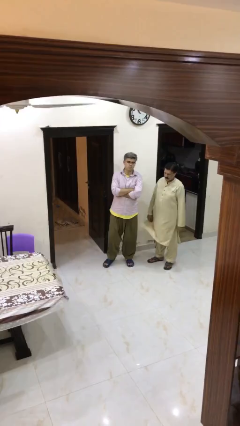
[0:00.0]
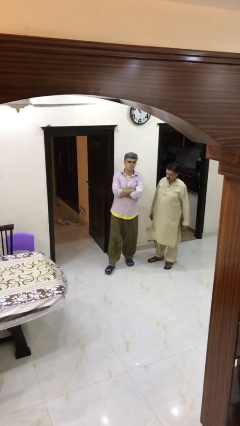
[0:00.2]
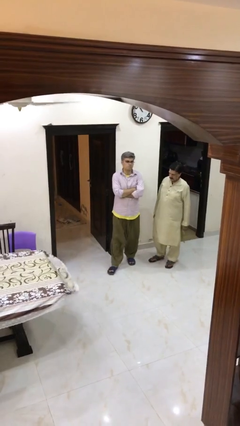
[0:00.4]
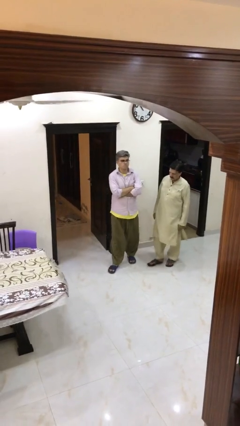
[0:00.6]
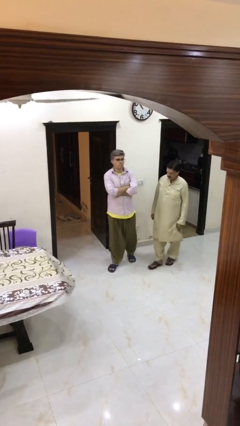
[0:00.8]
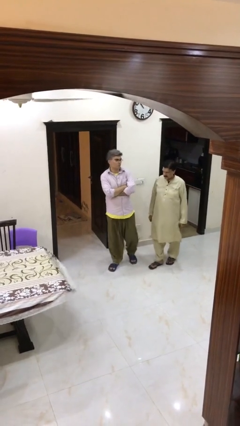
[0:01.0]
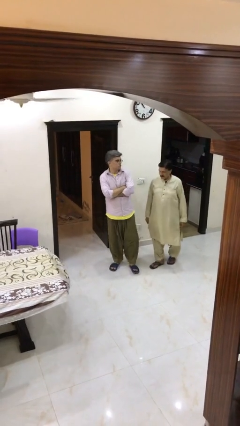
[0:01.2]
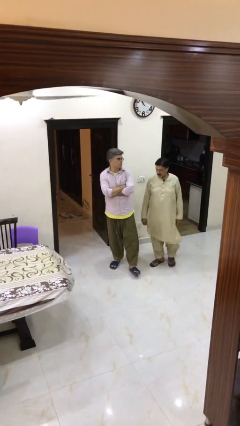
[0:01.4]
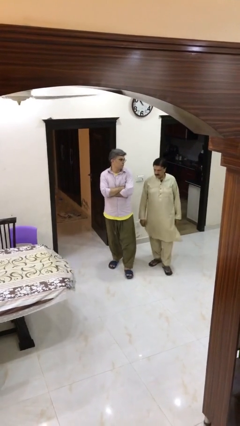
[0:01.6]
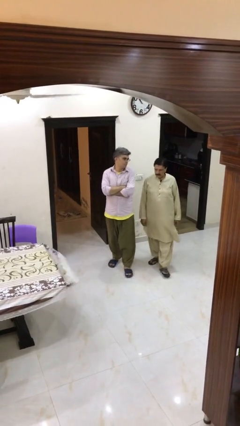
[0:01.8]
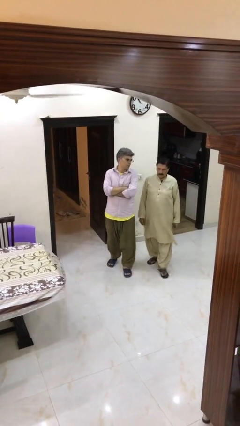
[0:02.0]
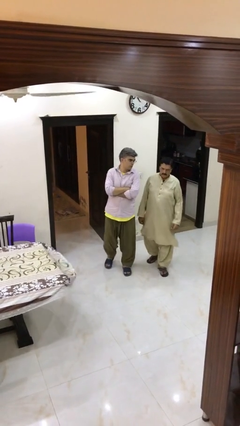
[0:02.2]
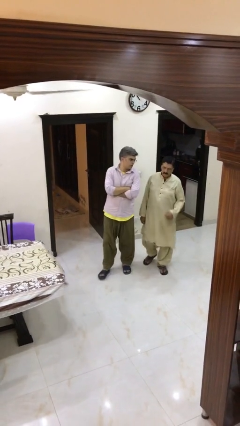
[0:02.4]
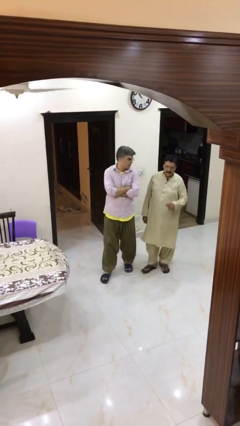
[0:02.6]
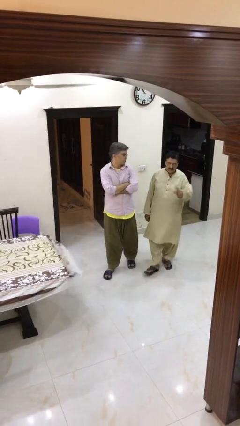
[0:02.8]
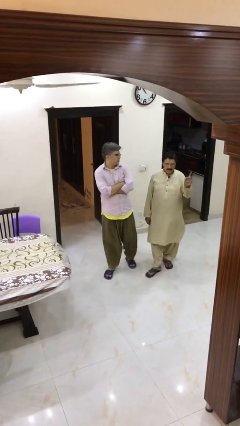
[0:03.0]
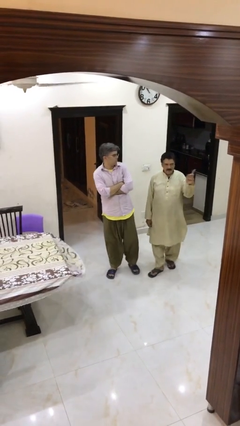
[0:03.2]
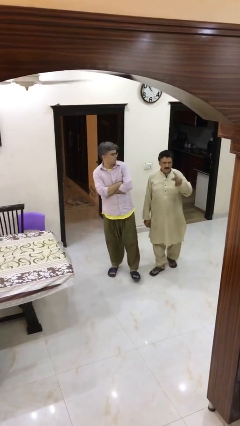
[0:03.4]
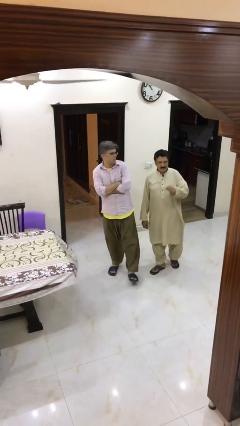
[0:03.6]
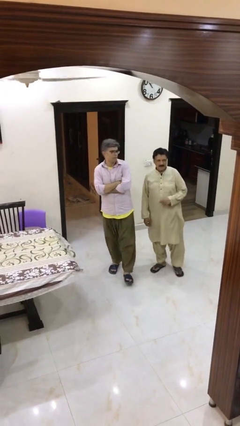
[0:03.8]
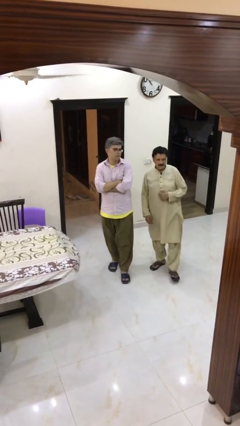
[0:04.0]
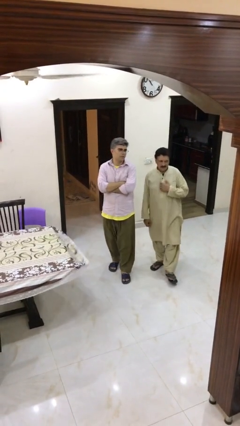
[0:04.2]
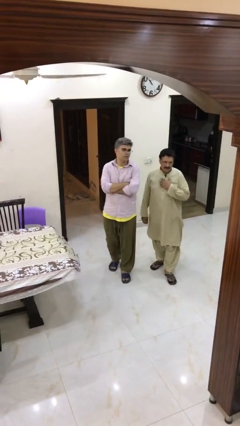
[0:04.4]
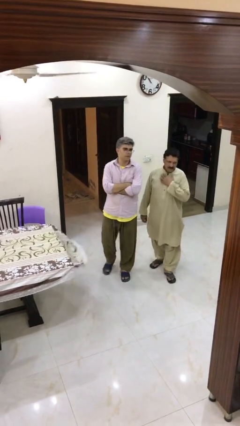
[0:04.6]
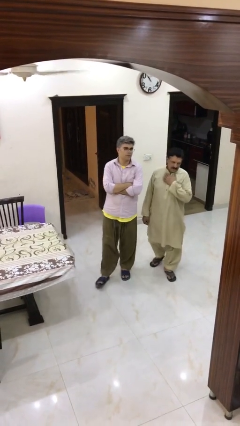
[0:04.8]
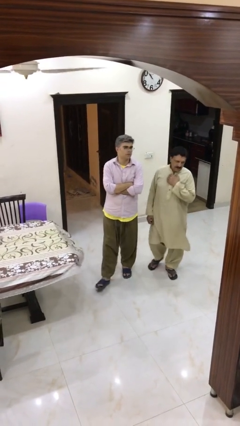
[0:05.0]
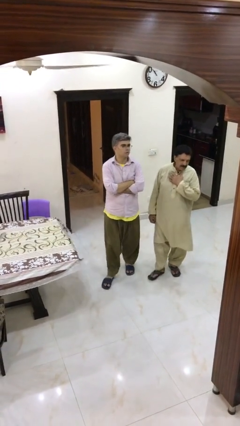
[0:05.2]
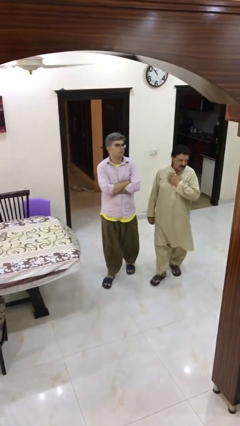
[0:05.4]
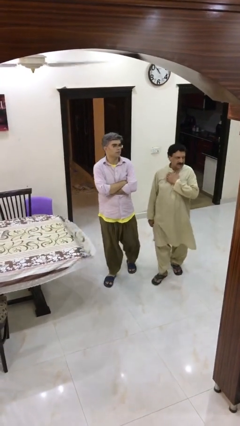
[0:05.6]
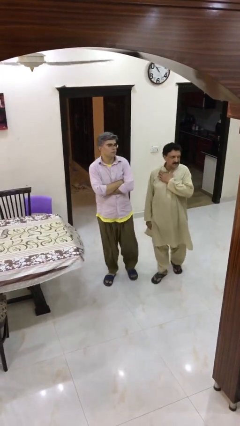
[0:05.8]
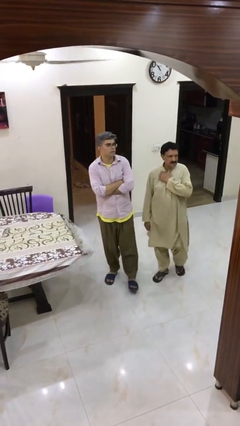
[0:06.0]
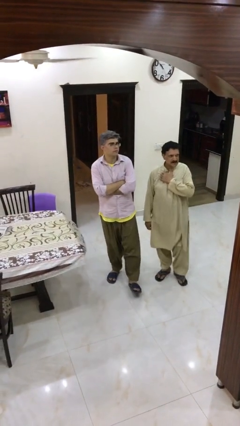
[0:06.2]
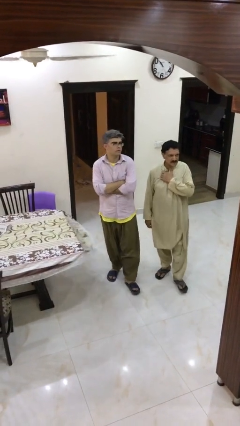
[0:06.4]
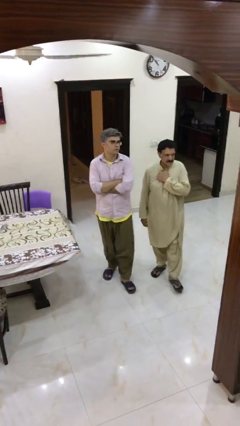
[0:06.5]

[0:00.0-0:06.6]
person talks to person

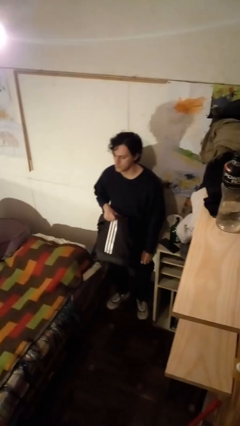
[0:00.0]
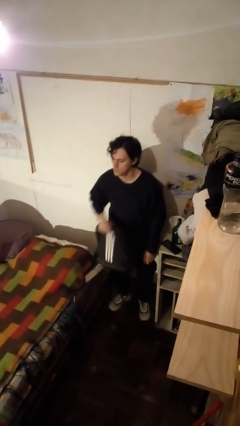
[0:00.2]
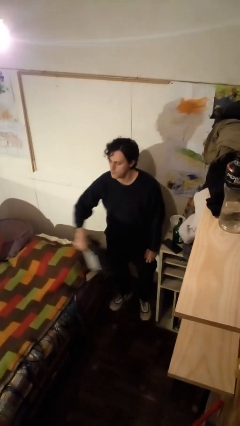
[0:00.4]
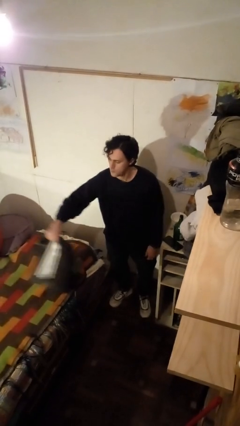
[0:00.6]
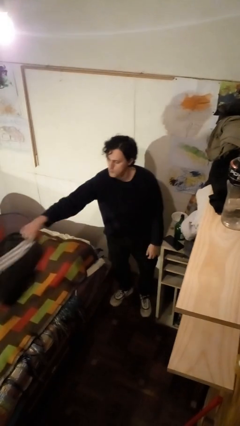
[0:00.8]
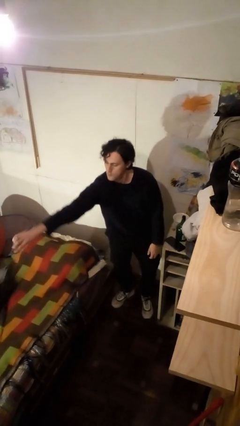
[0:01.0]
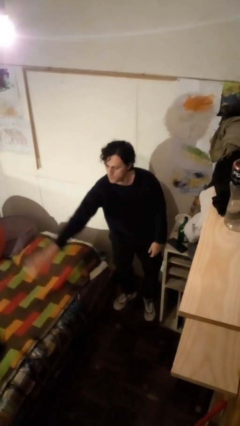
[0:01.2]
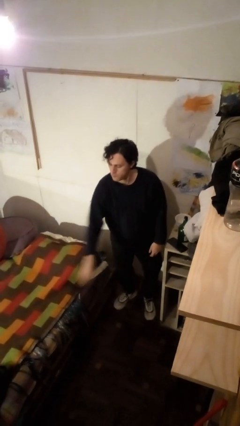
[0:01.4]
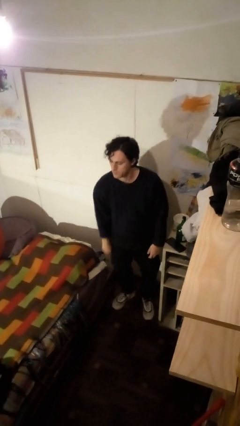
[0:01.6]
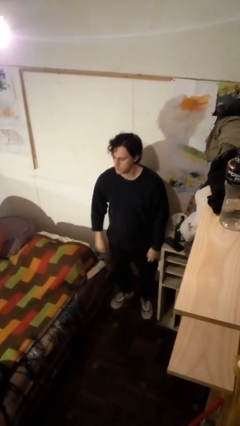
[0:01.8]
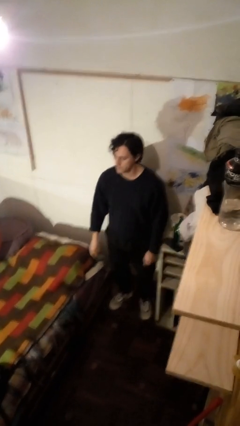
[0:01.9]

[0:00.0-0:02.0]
person throws object on bed

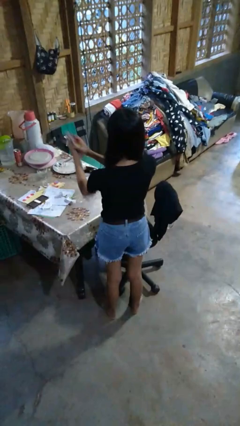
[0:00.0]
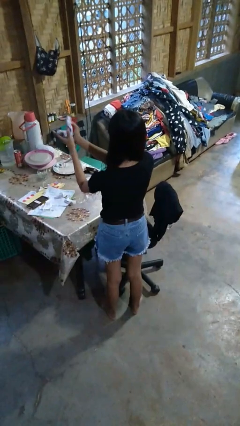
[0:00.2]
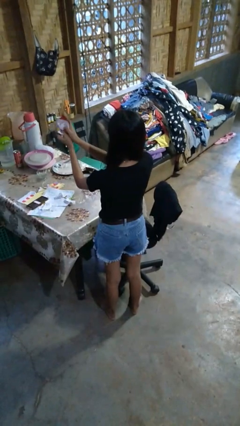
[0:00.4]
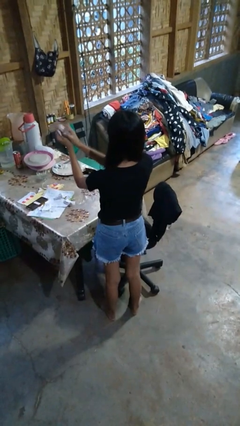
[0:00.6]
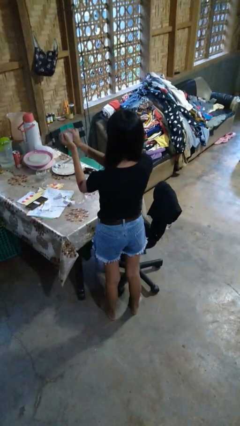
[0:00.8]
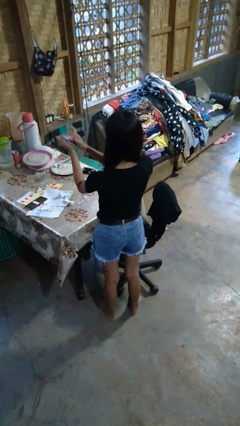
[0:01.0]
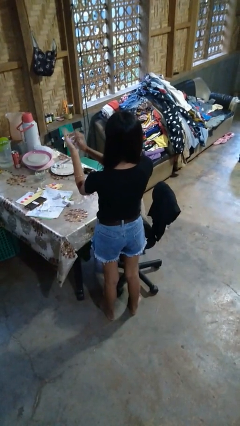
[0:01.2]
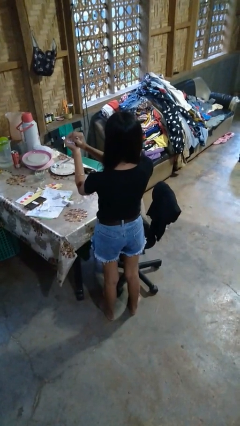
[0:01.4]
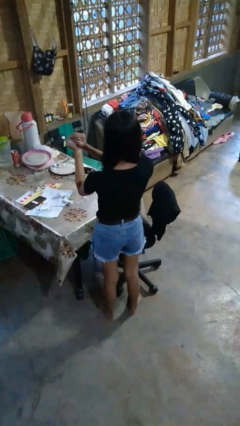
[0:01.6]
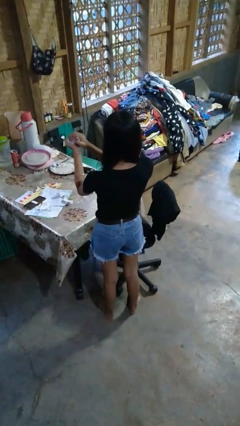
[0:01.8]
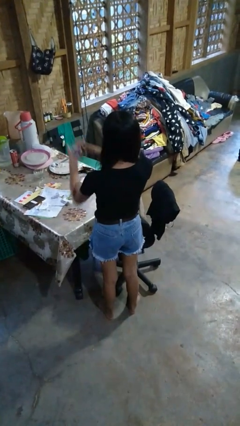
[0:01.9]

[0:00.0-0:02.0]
person crumples paper

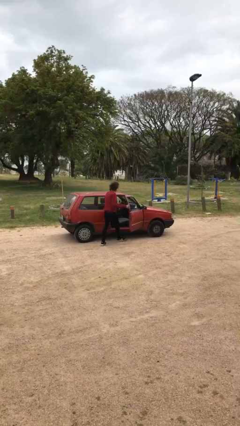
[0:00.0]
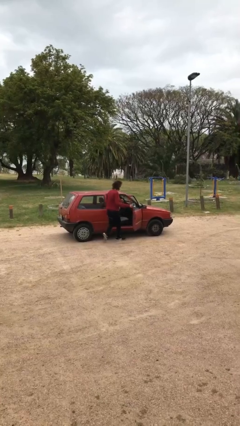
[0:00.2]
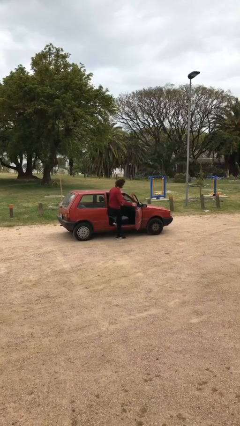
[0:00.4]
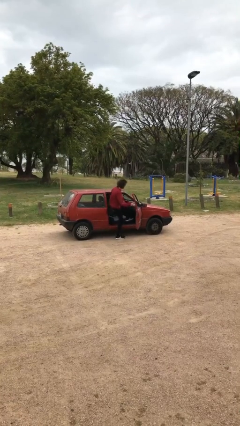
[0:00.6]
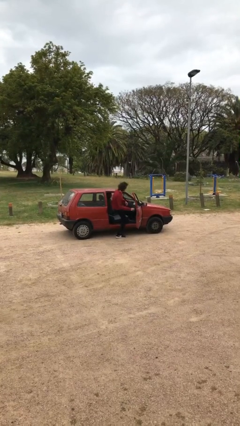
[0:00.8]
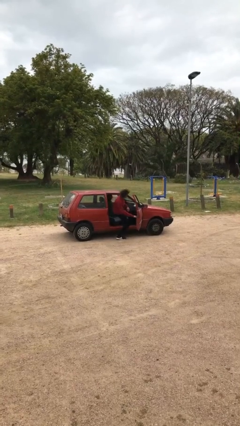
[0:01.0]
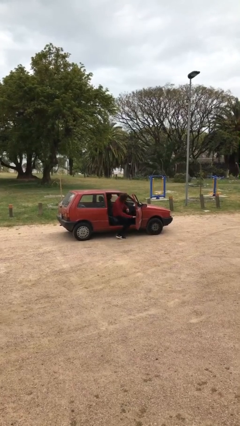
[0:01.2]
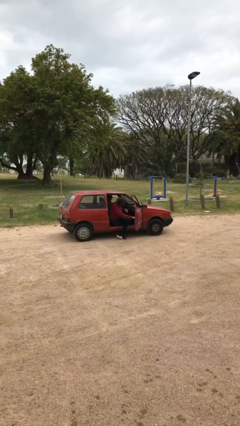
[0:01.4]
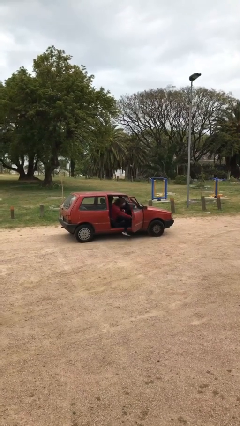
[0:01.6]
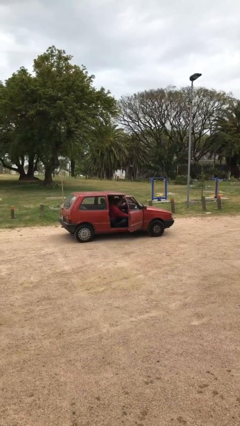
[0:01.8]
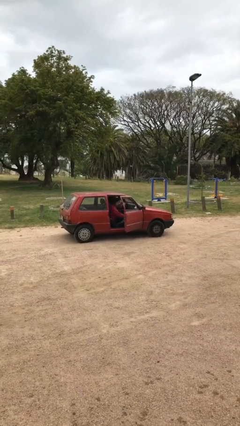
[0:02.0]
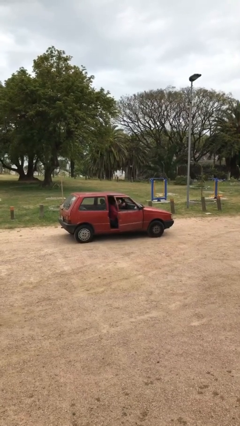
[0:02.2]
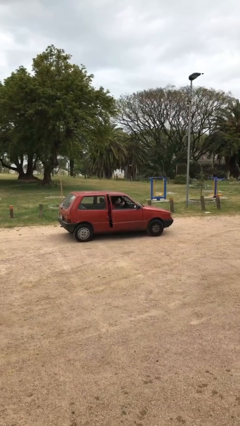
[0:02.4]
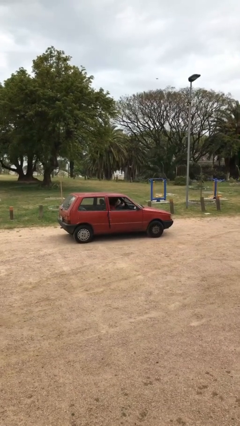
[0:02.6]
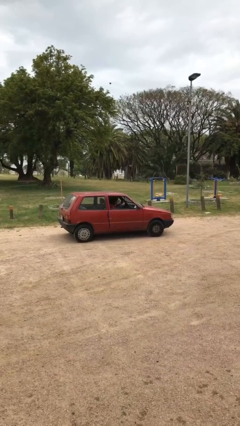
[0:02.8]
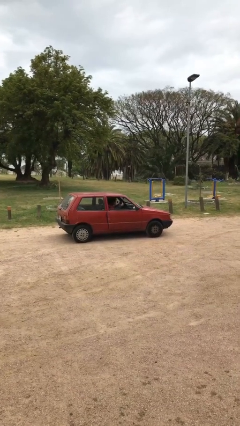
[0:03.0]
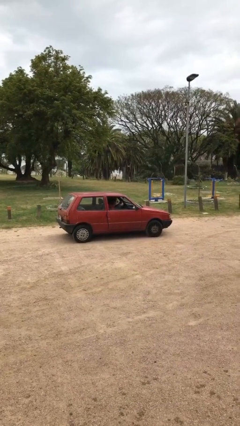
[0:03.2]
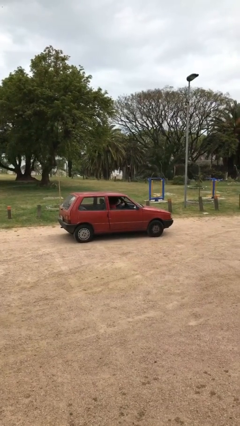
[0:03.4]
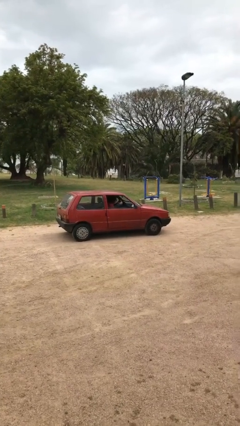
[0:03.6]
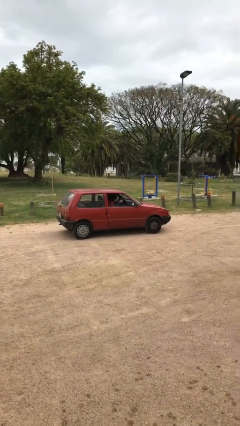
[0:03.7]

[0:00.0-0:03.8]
car picks up person

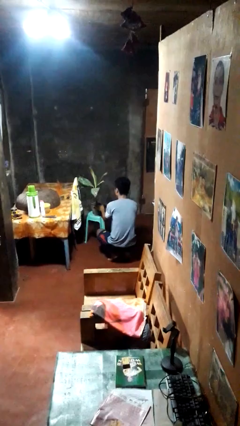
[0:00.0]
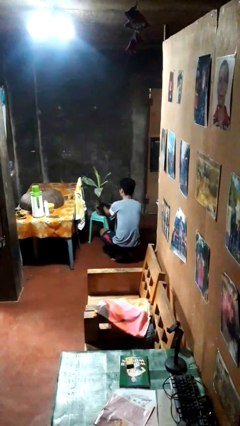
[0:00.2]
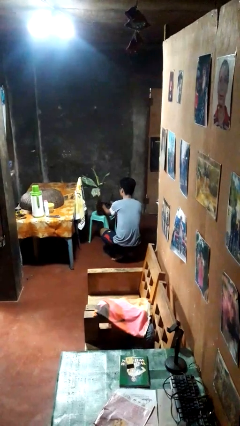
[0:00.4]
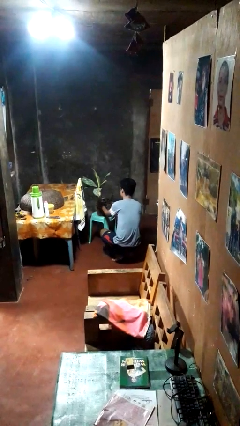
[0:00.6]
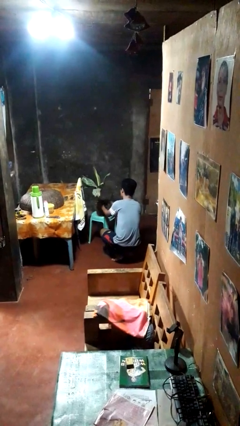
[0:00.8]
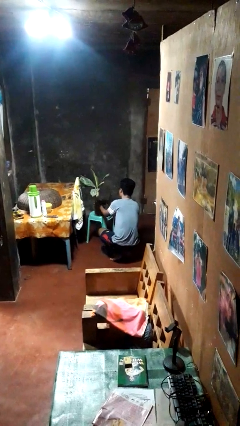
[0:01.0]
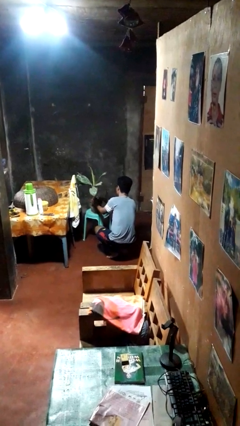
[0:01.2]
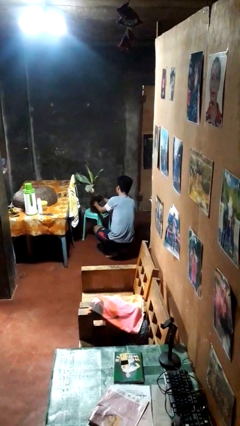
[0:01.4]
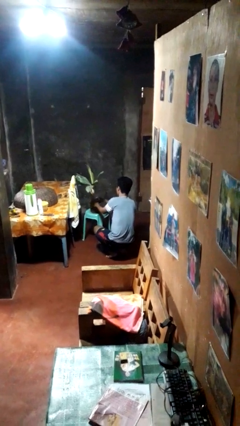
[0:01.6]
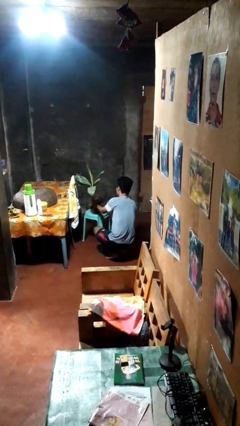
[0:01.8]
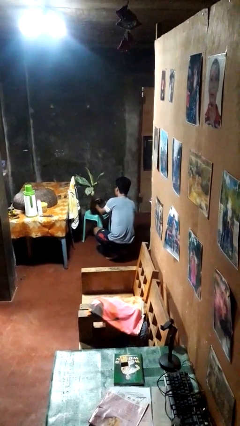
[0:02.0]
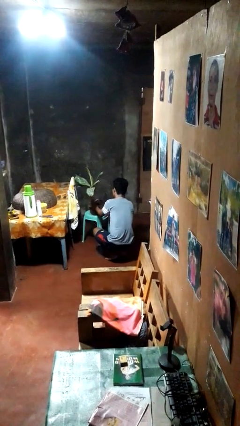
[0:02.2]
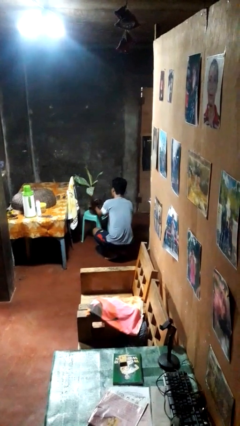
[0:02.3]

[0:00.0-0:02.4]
person arranges flowers in vase

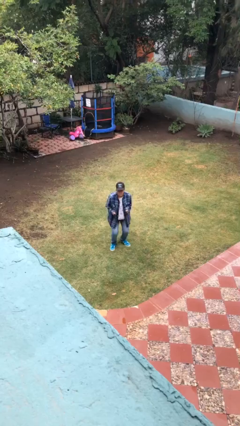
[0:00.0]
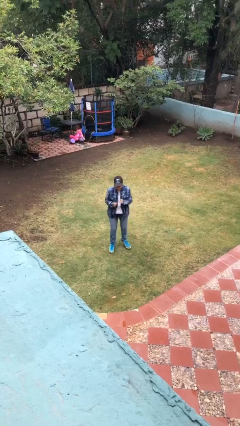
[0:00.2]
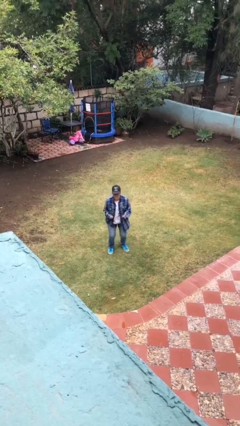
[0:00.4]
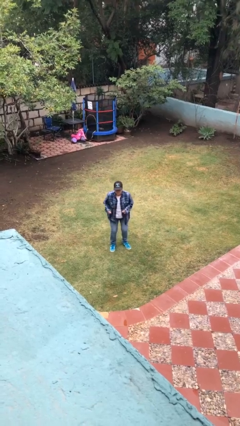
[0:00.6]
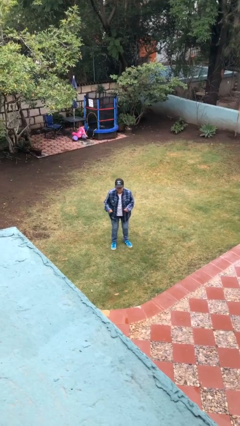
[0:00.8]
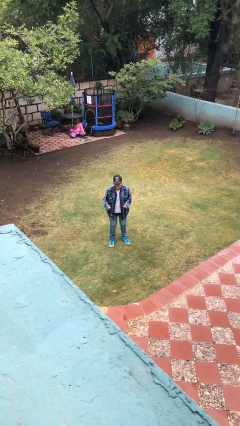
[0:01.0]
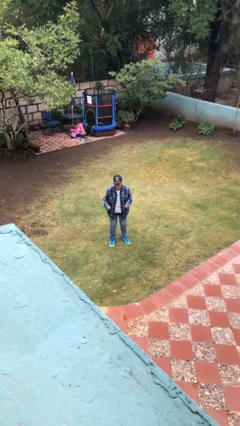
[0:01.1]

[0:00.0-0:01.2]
person jumps
